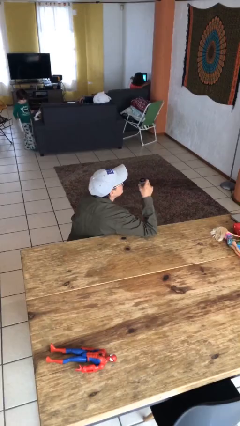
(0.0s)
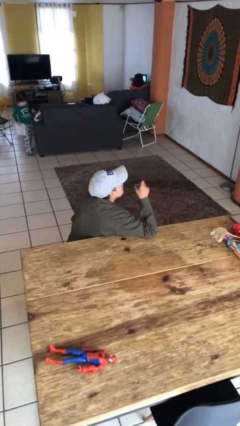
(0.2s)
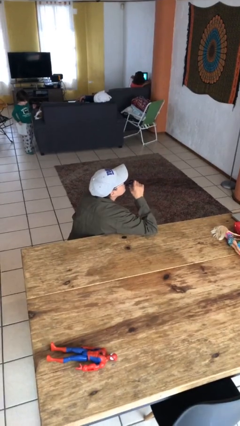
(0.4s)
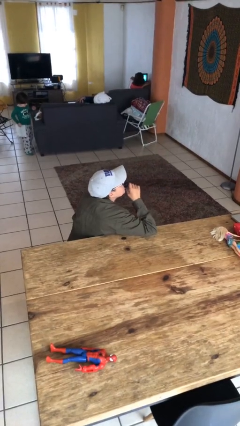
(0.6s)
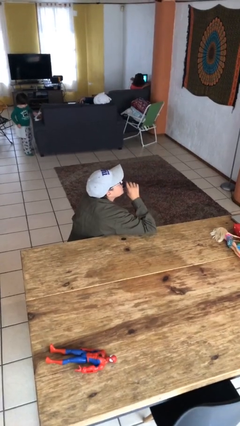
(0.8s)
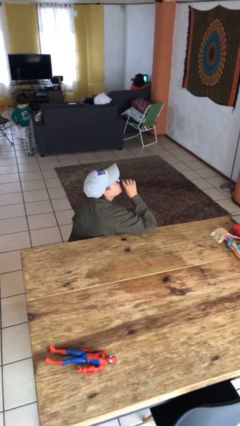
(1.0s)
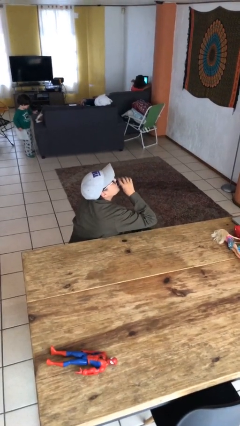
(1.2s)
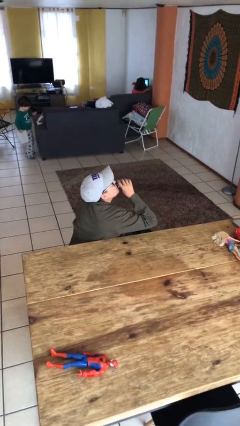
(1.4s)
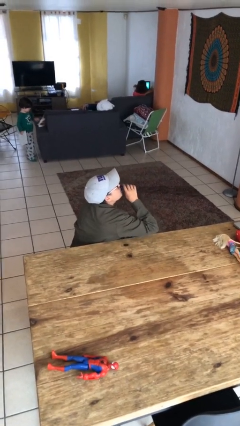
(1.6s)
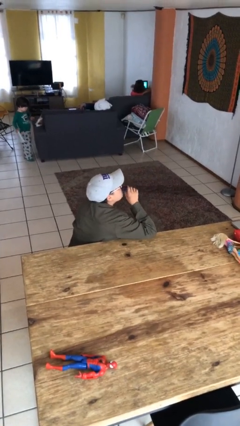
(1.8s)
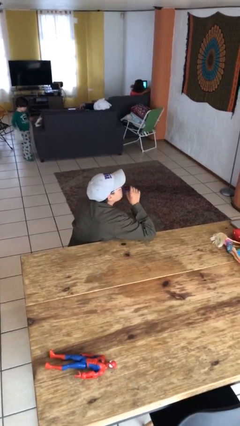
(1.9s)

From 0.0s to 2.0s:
person drinks from shotglass

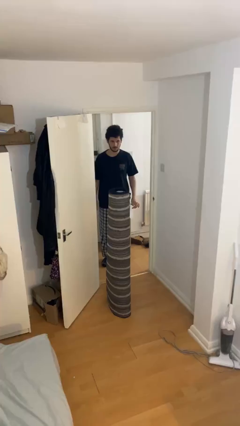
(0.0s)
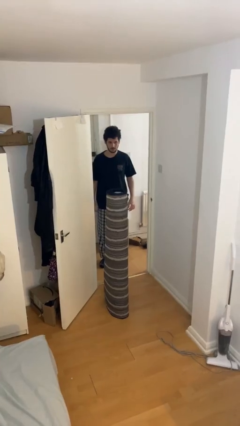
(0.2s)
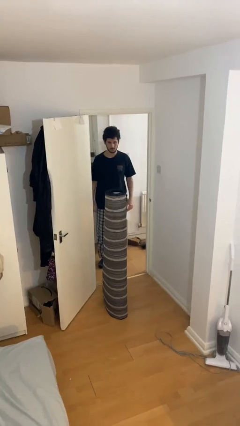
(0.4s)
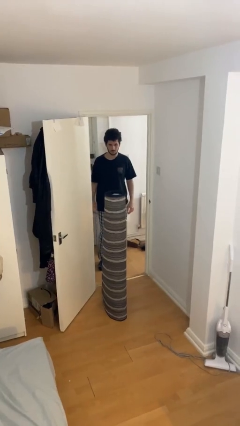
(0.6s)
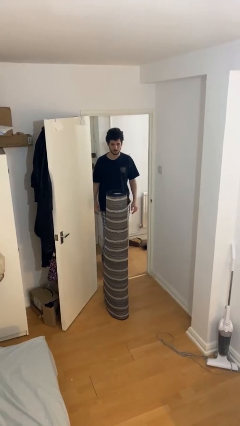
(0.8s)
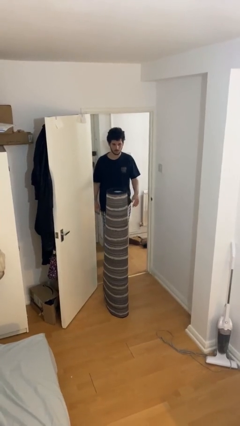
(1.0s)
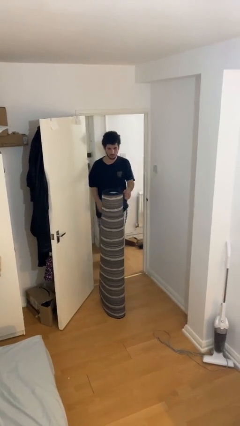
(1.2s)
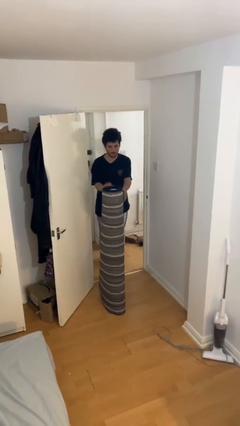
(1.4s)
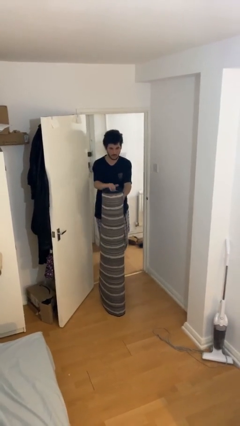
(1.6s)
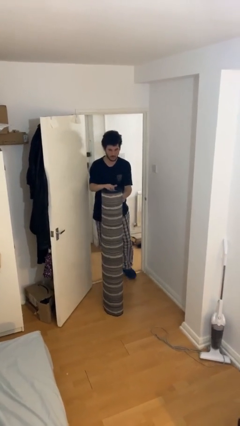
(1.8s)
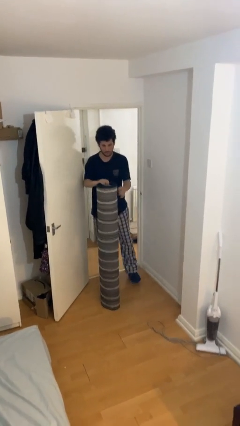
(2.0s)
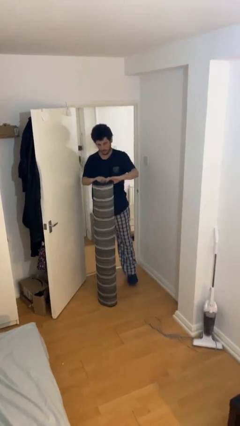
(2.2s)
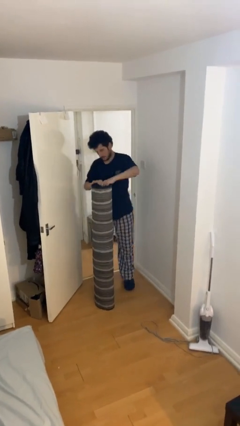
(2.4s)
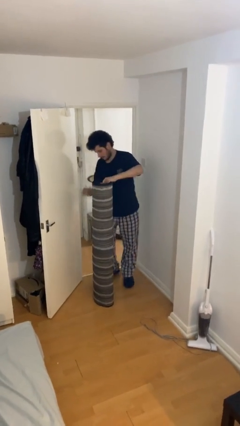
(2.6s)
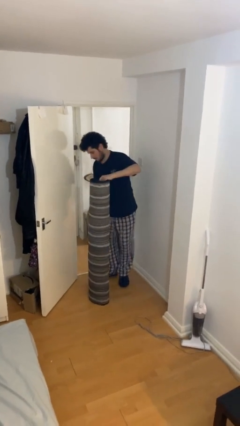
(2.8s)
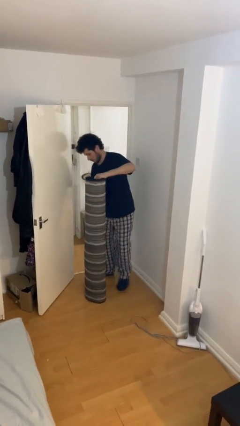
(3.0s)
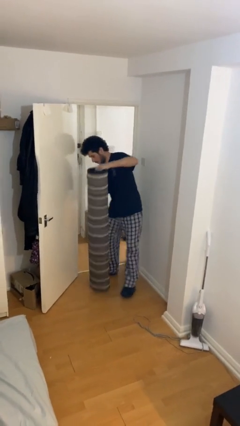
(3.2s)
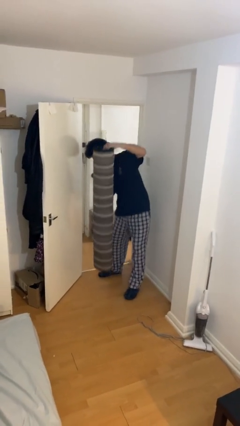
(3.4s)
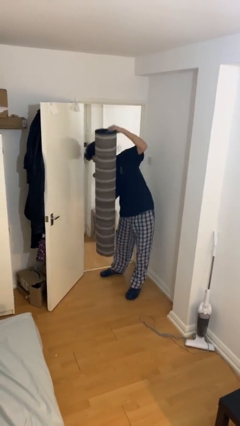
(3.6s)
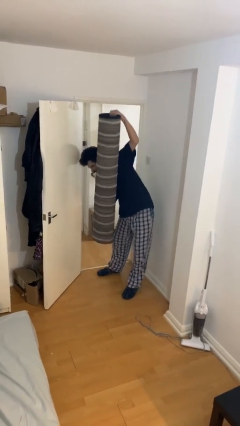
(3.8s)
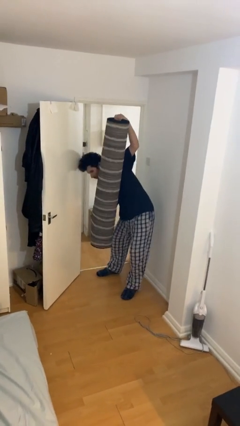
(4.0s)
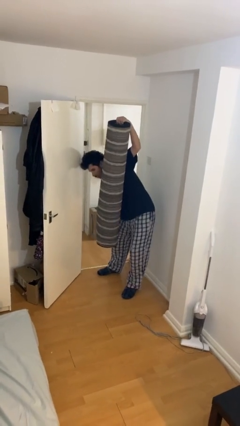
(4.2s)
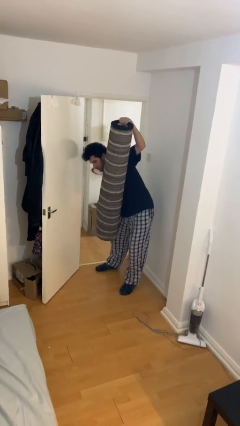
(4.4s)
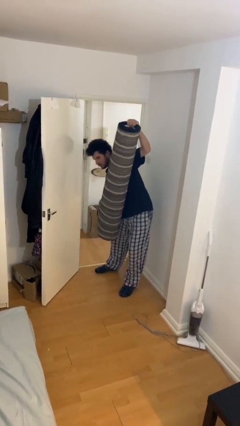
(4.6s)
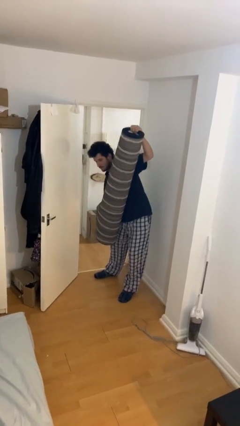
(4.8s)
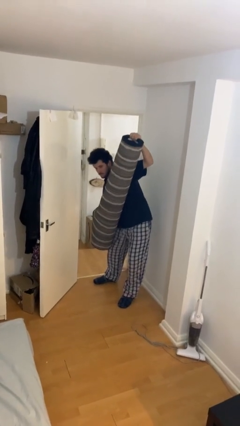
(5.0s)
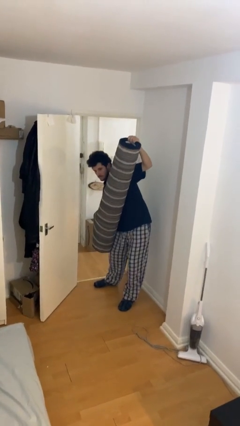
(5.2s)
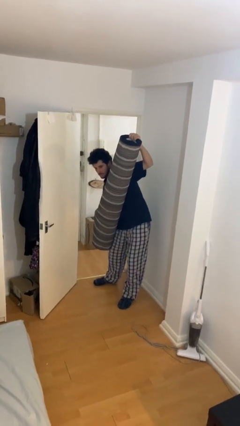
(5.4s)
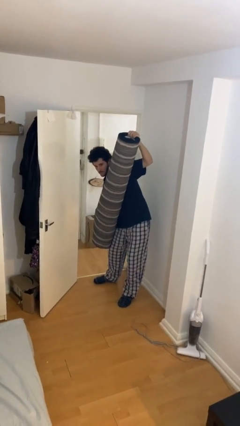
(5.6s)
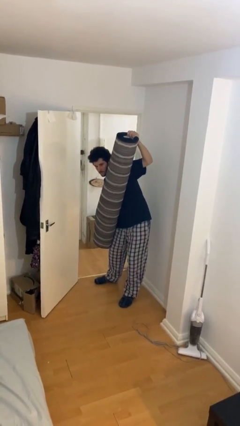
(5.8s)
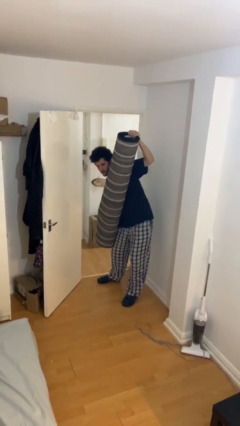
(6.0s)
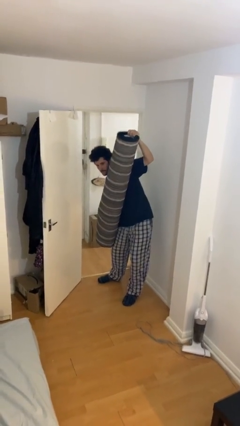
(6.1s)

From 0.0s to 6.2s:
person picks up object from floor

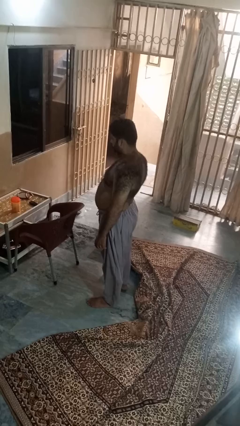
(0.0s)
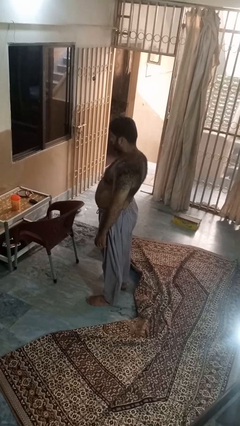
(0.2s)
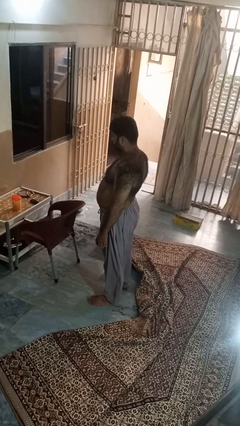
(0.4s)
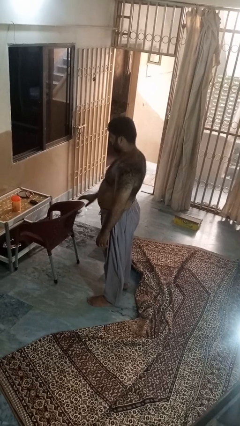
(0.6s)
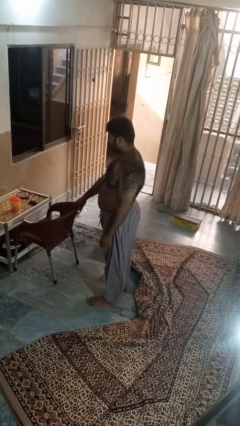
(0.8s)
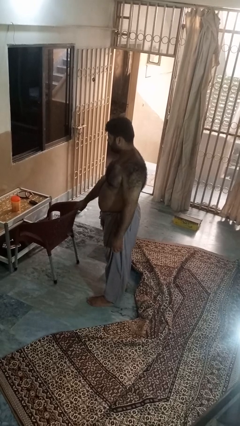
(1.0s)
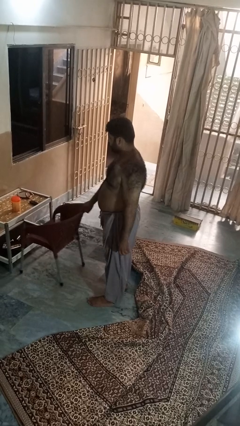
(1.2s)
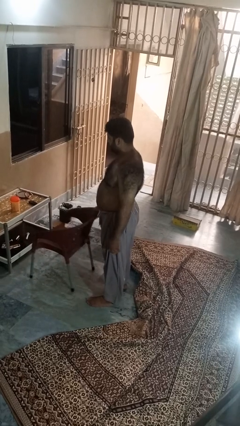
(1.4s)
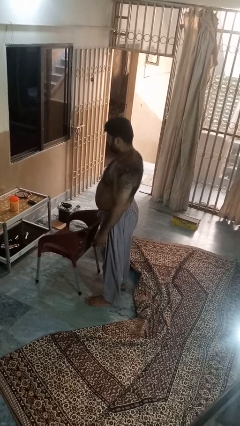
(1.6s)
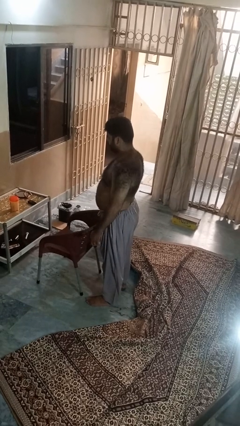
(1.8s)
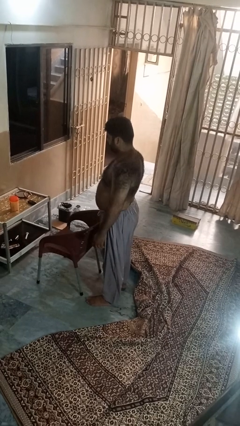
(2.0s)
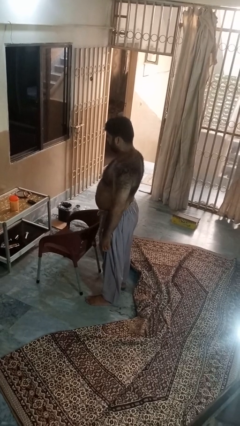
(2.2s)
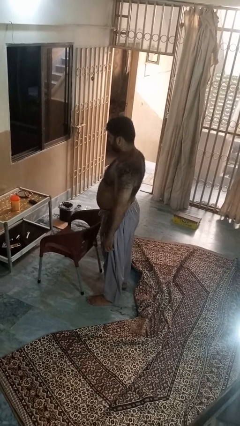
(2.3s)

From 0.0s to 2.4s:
person pulls out chair

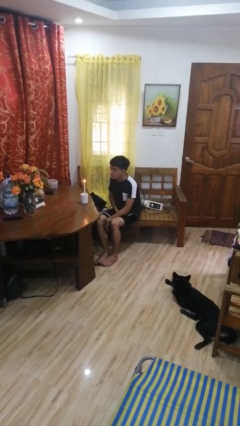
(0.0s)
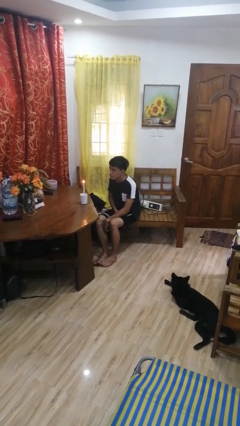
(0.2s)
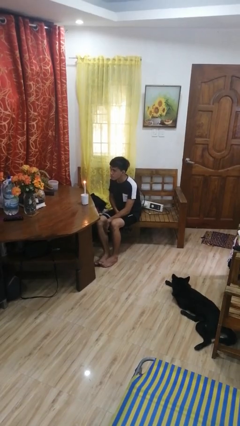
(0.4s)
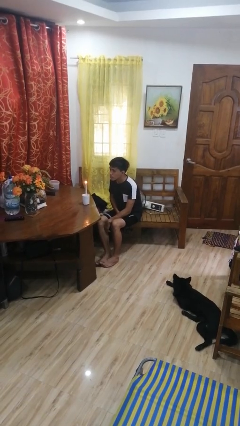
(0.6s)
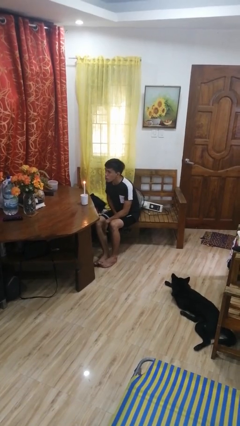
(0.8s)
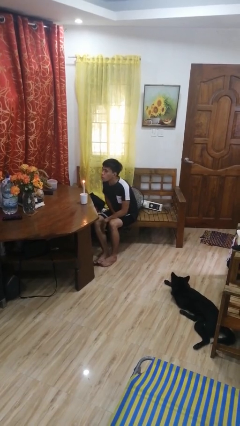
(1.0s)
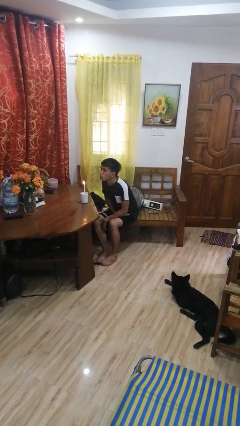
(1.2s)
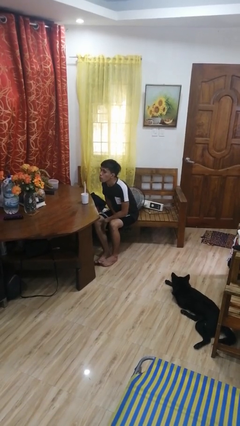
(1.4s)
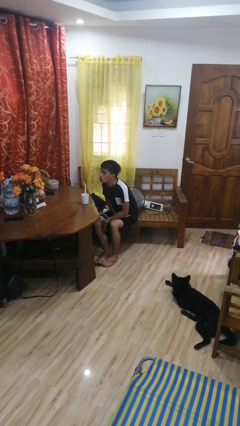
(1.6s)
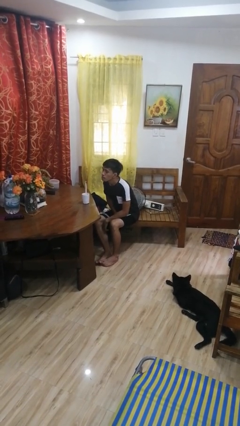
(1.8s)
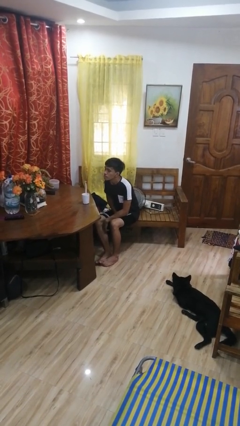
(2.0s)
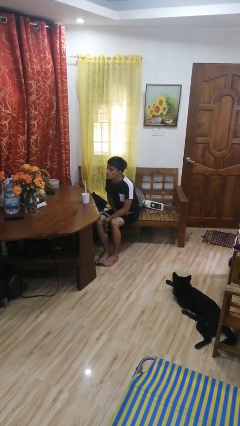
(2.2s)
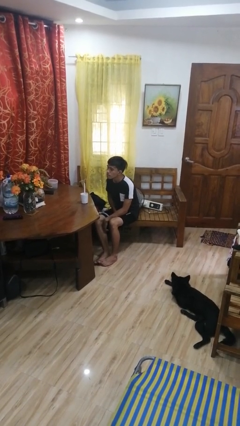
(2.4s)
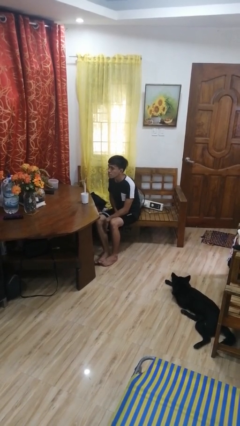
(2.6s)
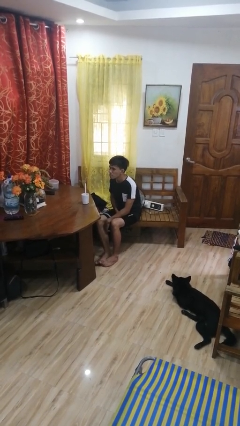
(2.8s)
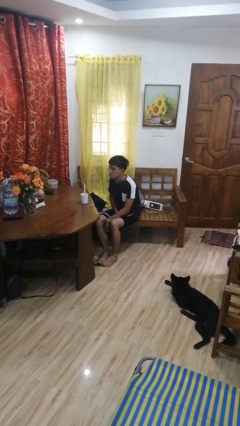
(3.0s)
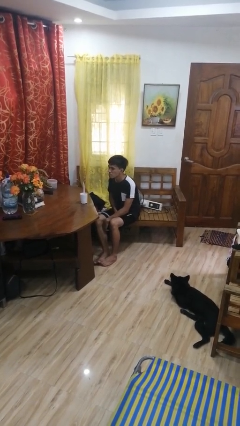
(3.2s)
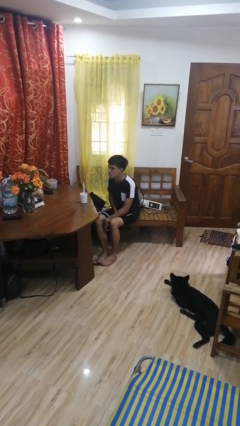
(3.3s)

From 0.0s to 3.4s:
person extinguishes candle

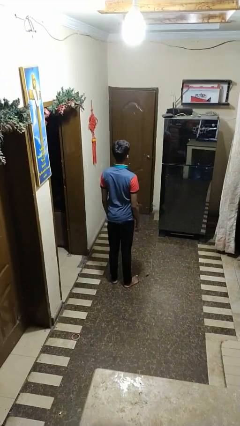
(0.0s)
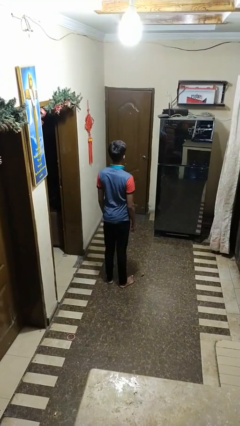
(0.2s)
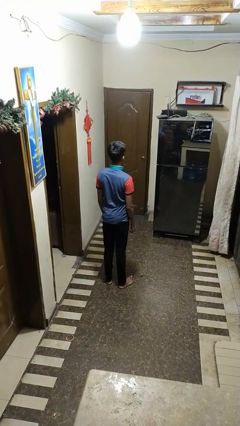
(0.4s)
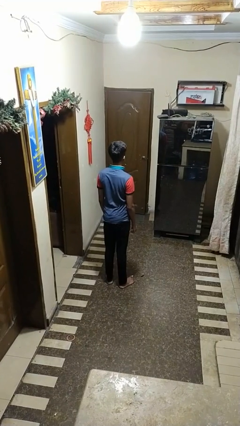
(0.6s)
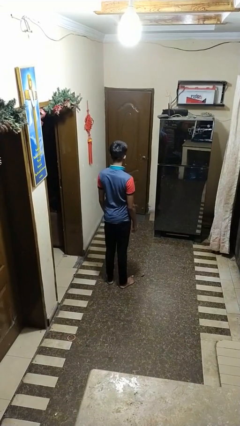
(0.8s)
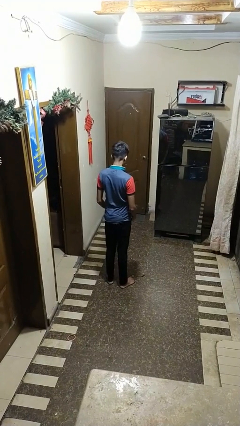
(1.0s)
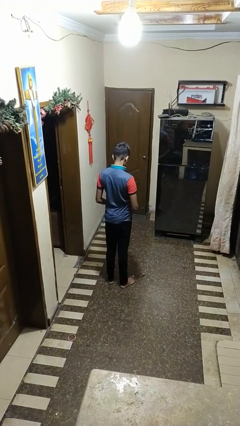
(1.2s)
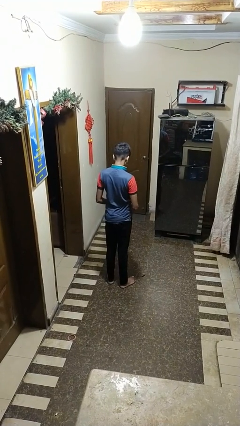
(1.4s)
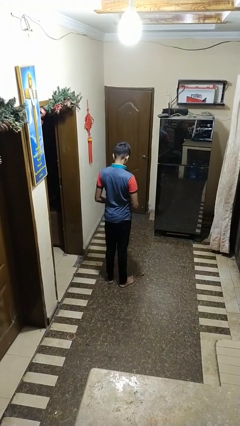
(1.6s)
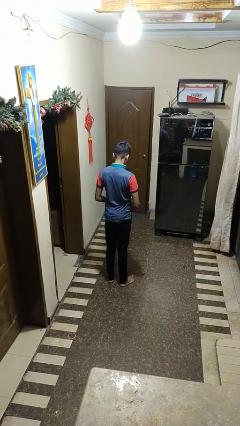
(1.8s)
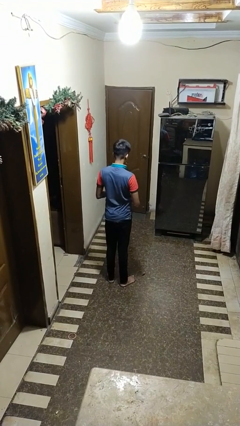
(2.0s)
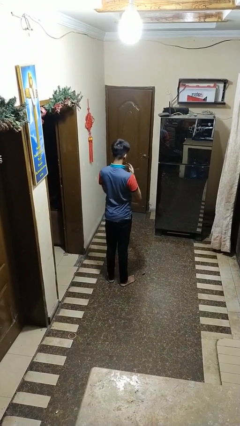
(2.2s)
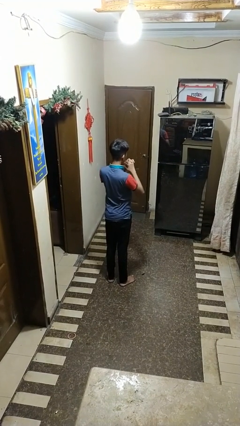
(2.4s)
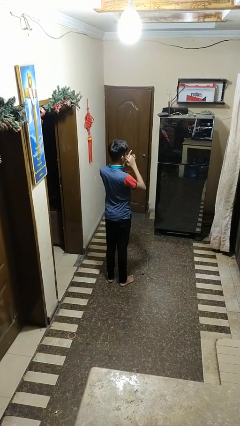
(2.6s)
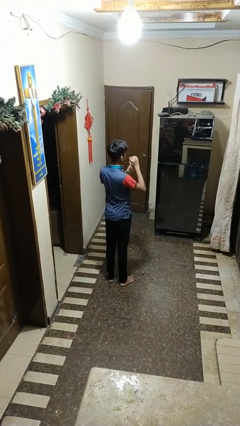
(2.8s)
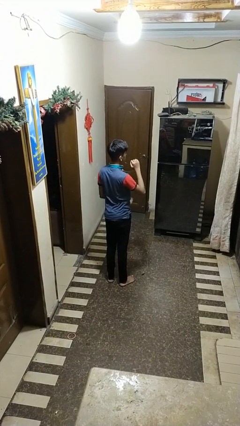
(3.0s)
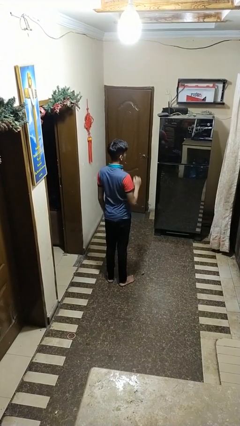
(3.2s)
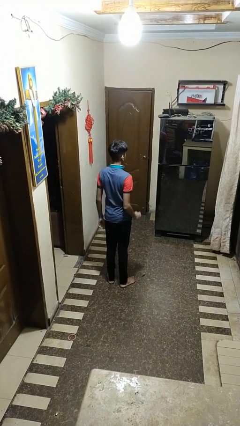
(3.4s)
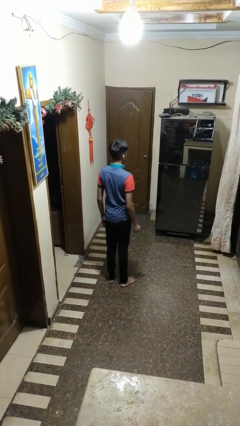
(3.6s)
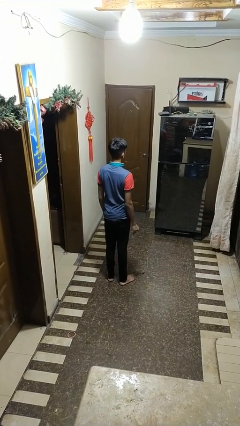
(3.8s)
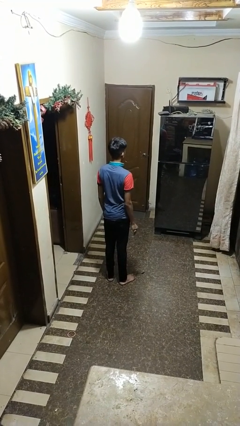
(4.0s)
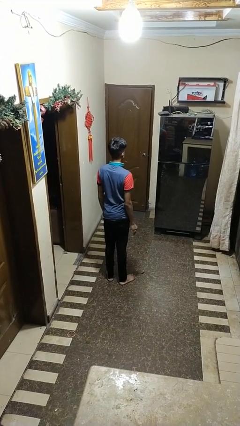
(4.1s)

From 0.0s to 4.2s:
person puts on ring
